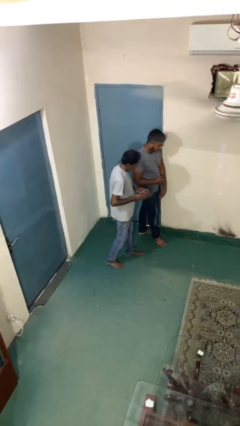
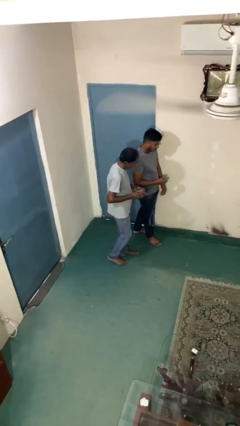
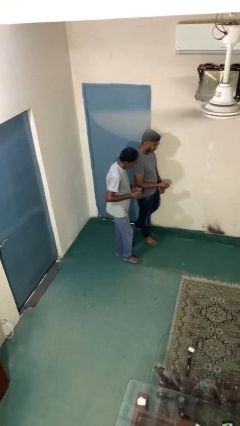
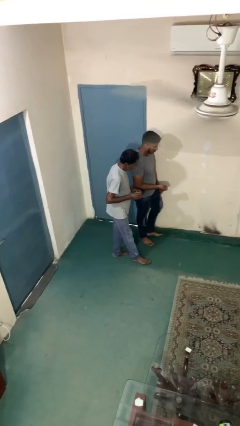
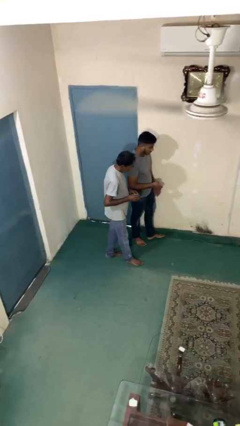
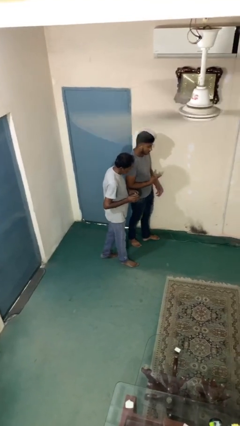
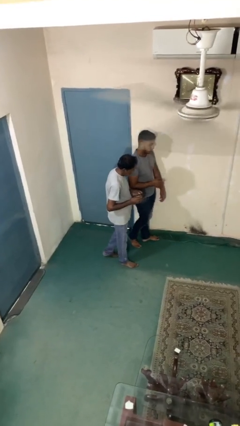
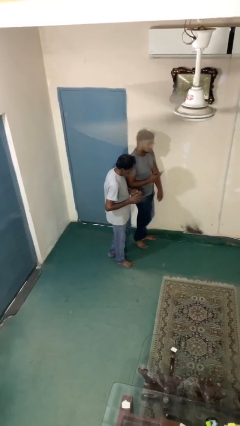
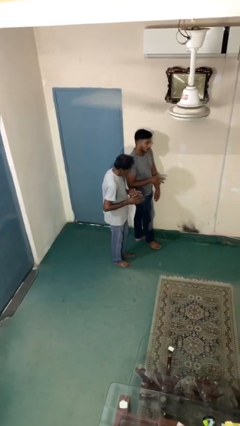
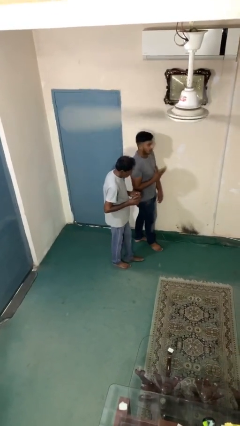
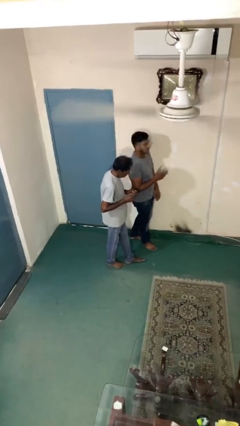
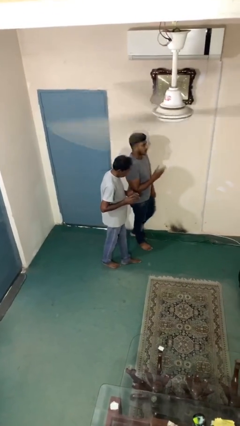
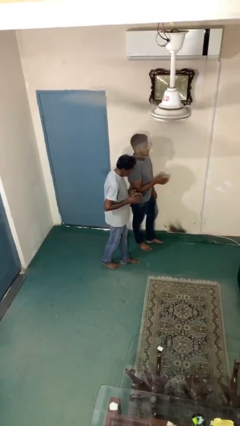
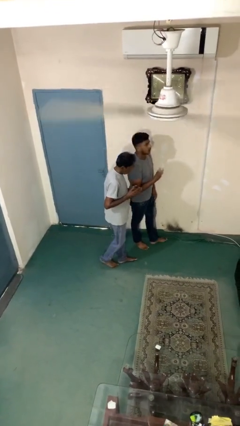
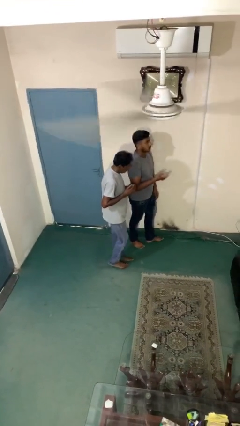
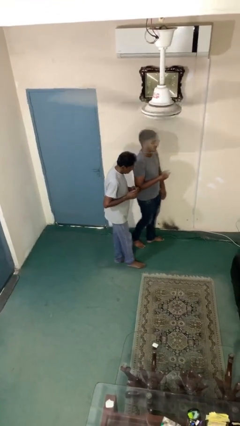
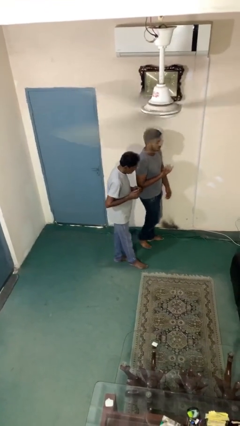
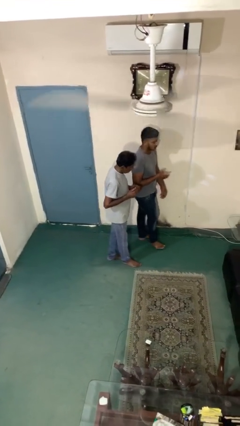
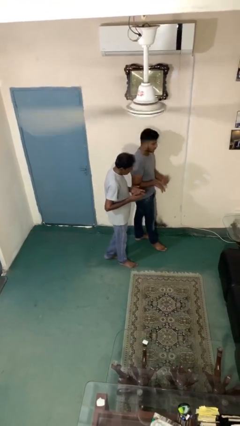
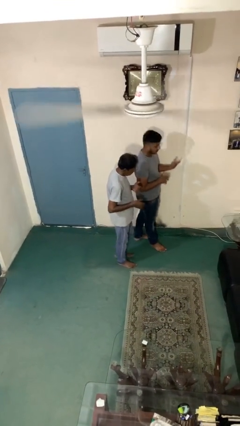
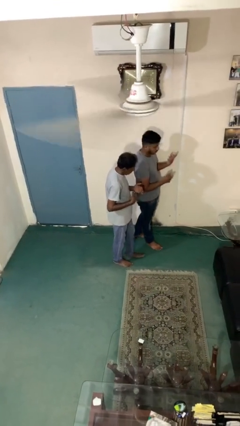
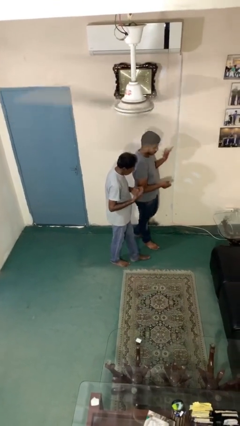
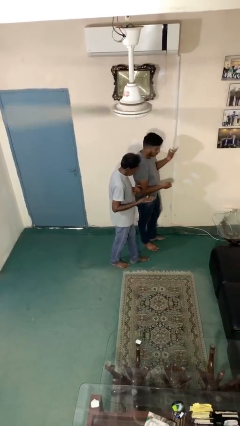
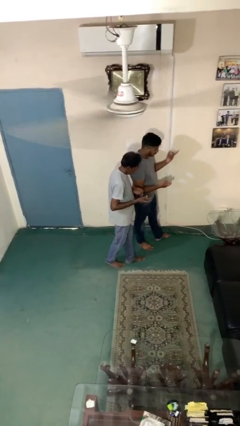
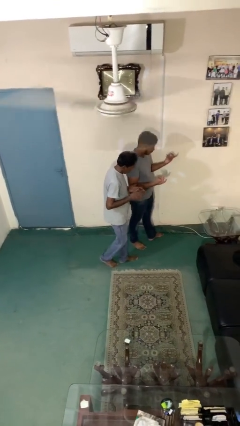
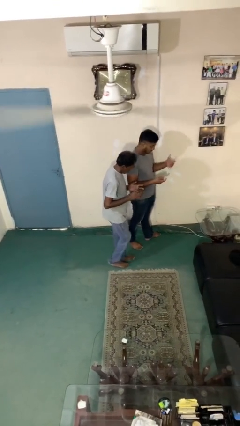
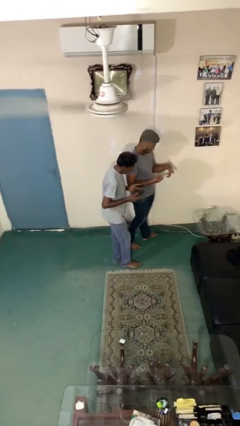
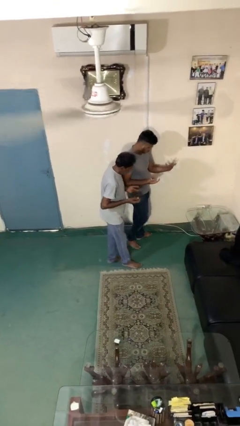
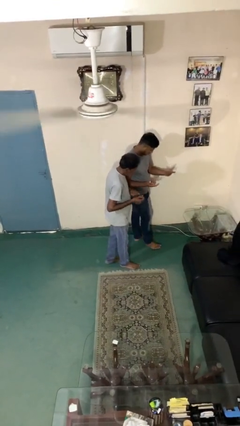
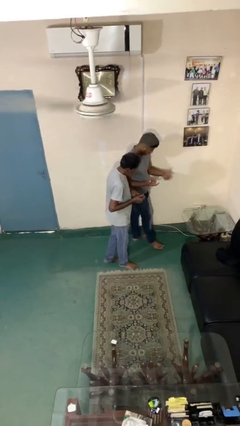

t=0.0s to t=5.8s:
person talks to person

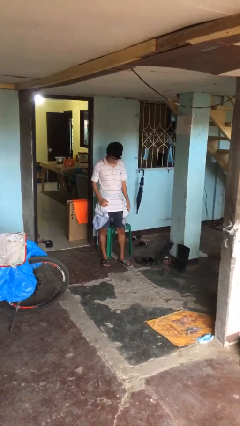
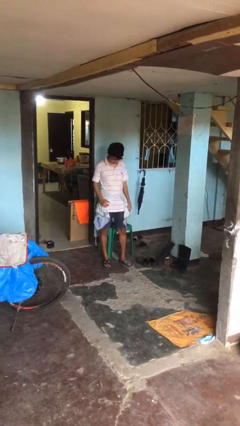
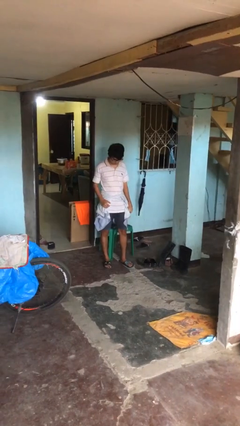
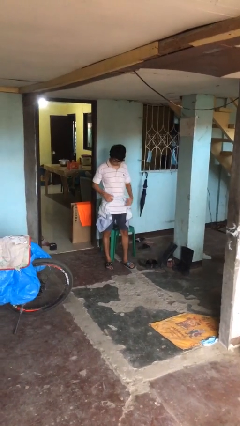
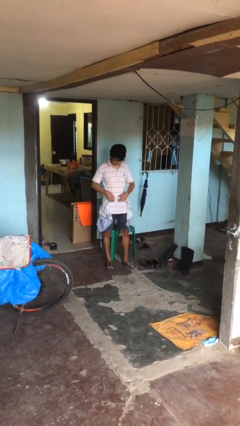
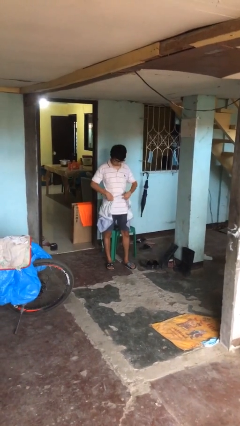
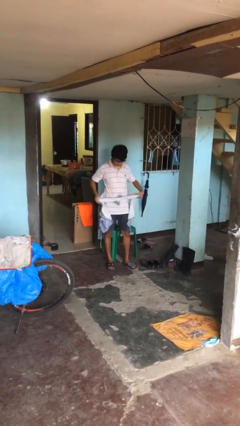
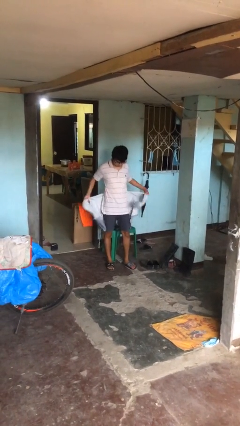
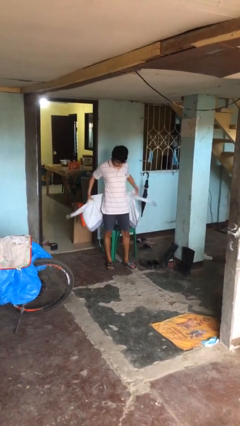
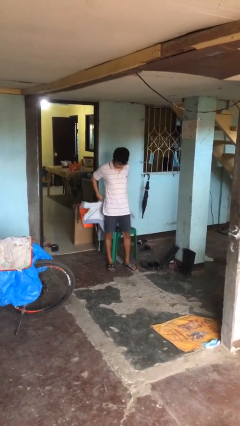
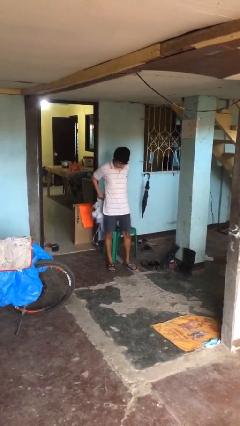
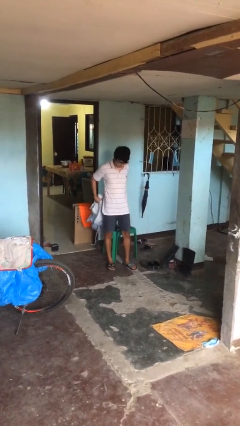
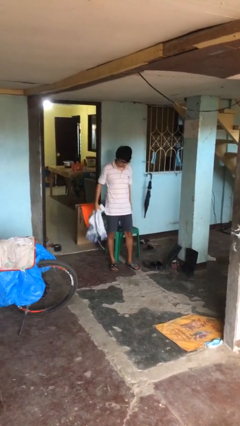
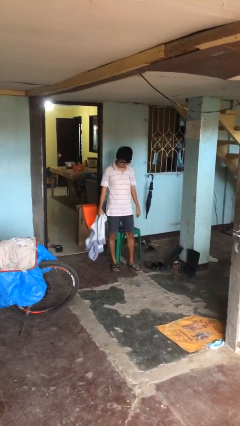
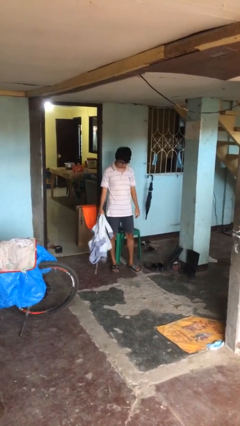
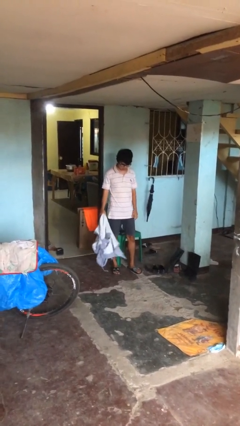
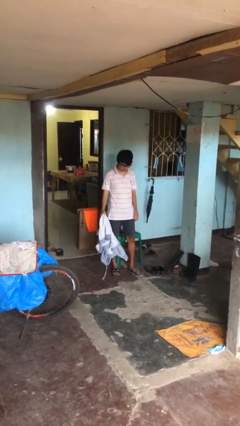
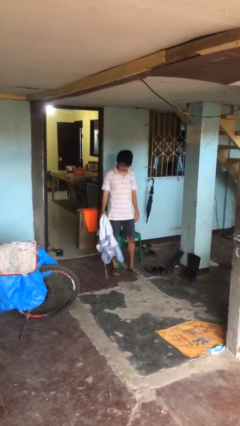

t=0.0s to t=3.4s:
person unties jacket around waist

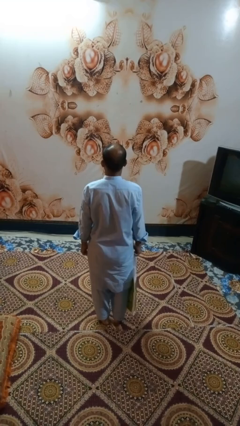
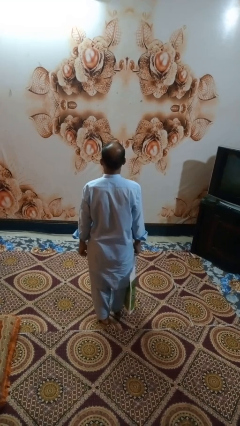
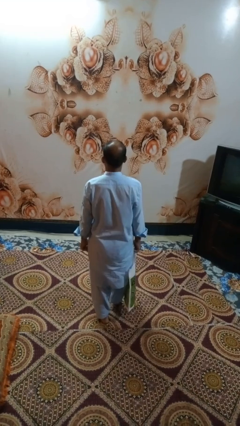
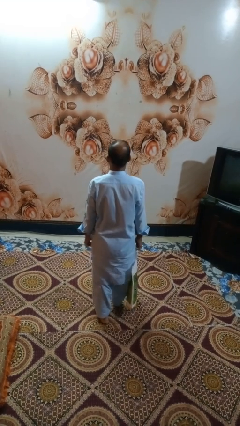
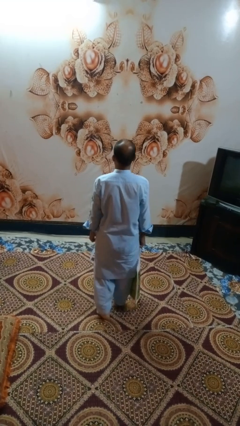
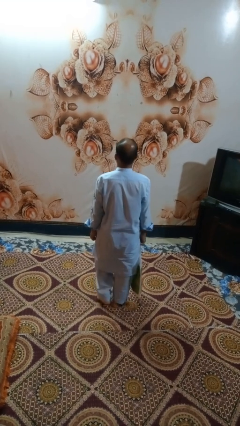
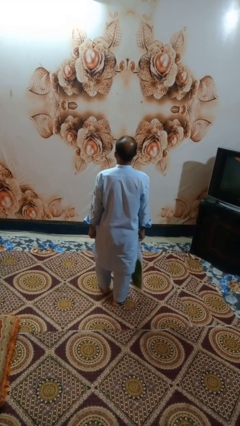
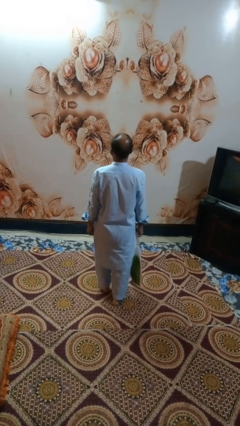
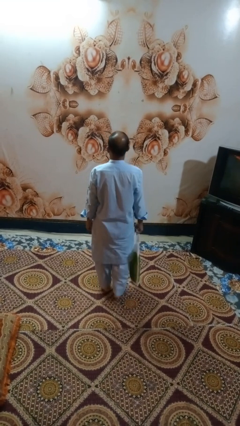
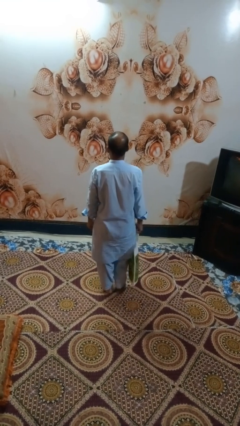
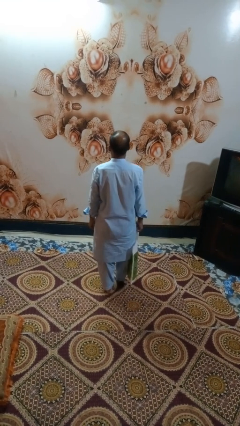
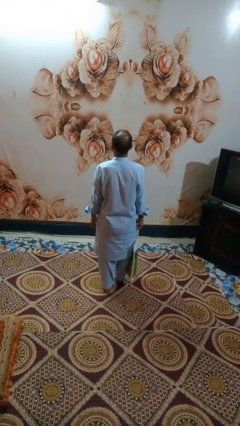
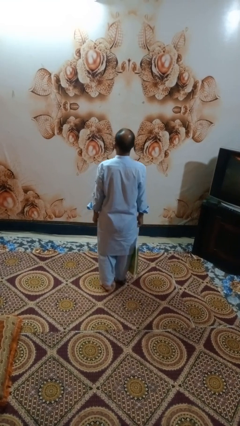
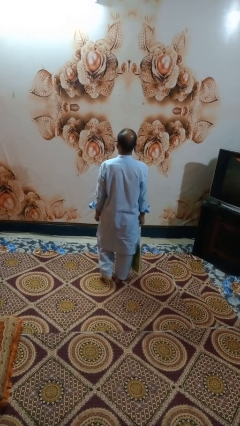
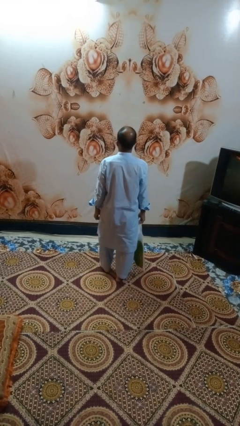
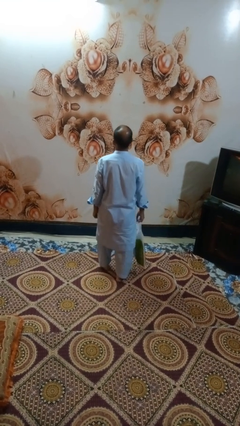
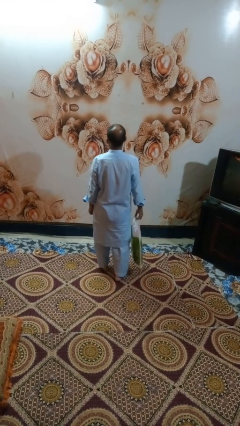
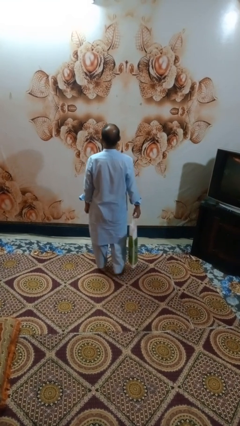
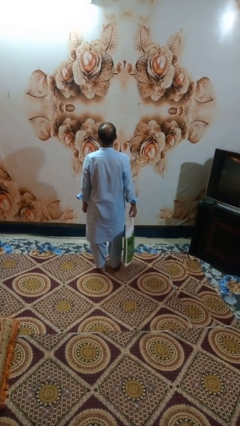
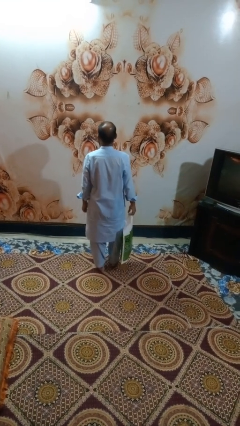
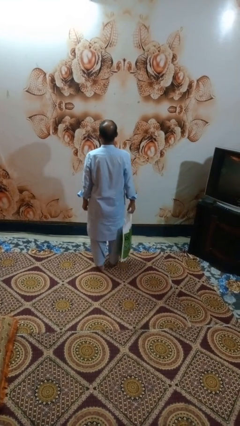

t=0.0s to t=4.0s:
person carries groceries

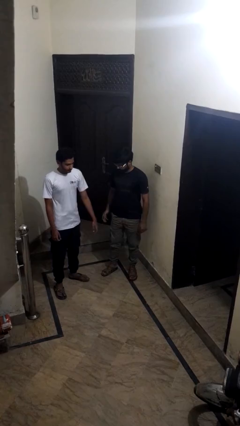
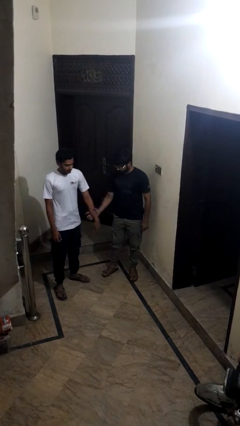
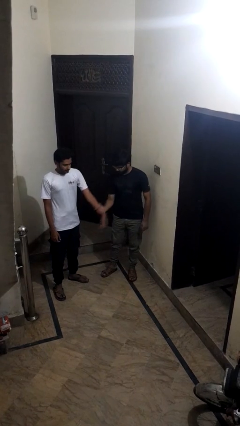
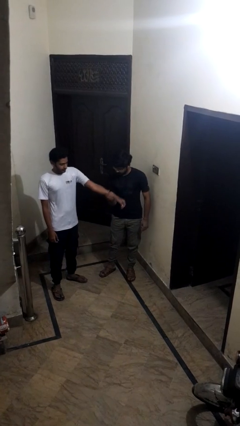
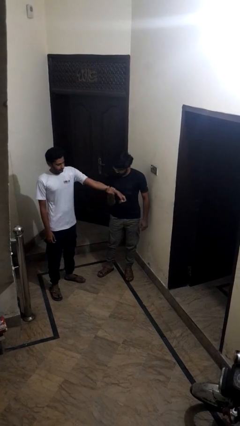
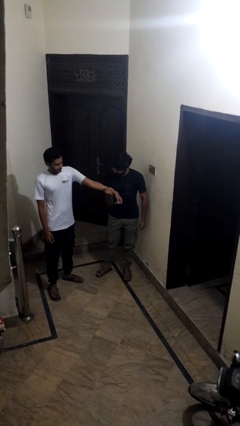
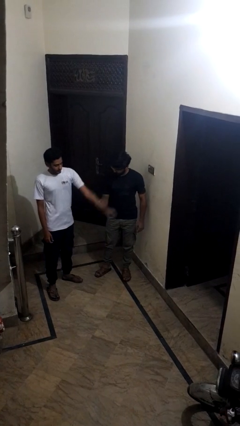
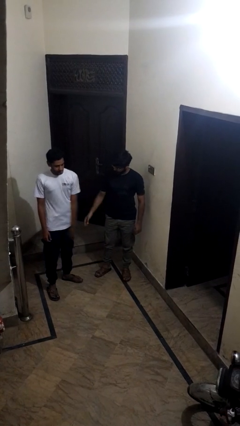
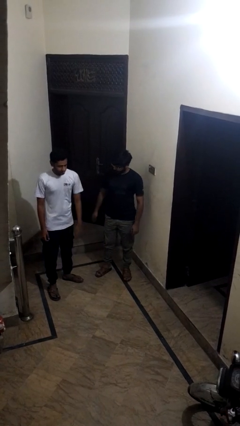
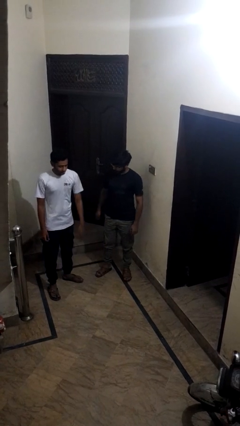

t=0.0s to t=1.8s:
person grabs person by forearm

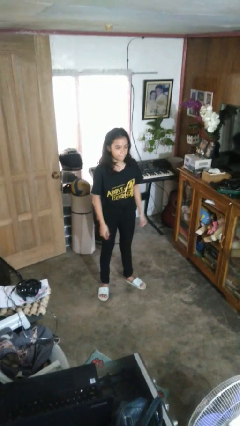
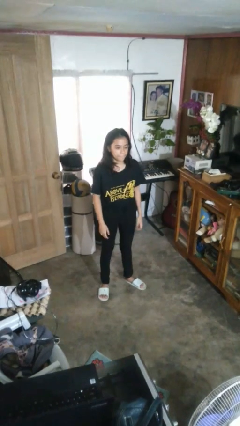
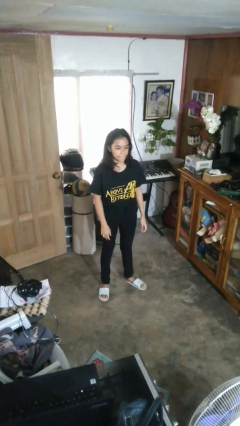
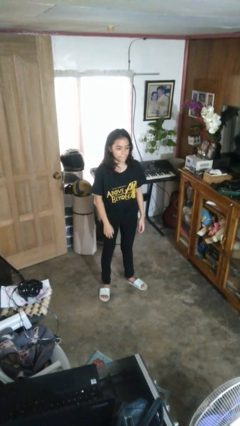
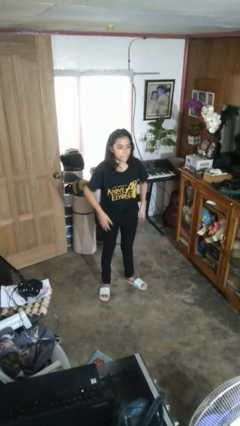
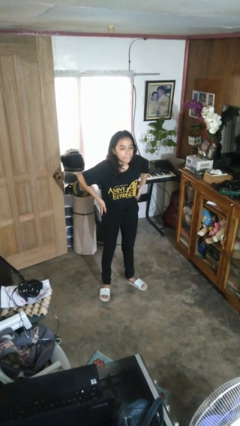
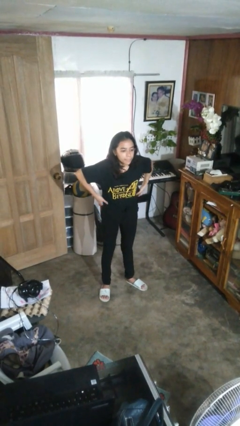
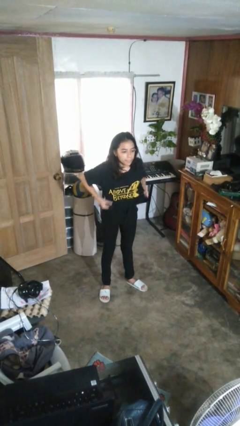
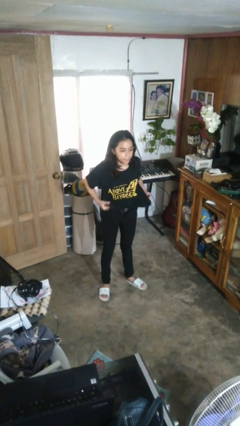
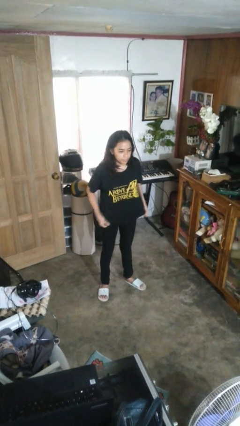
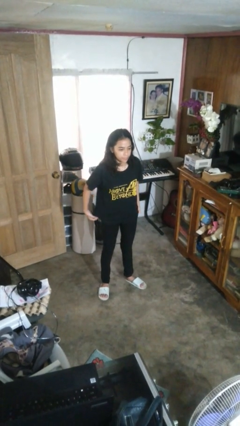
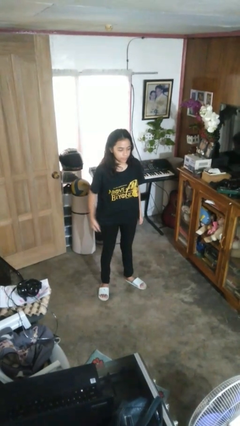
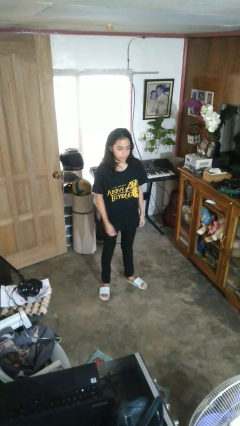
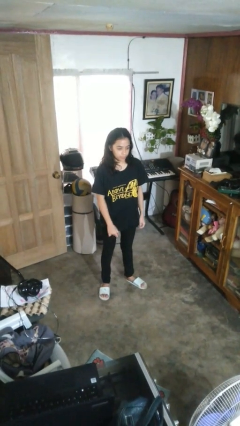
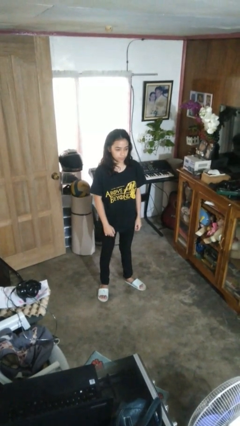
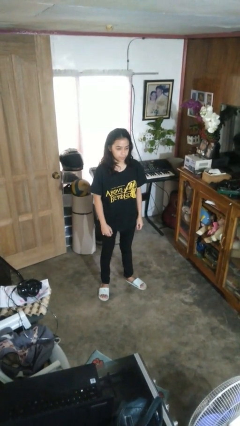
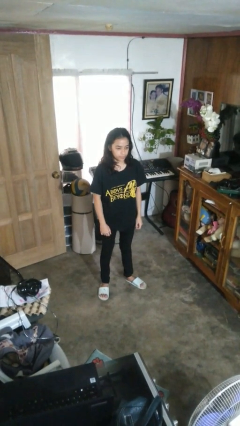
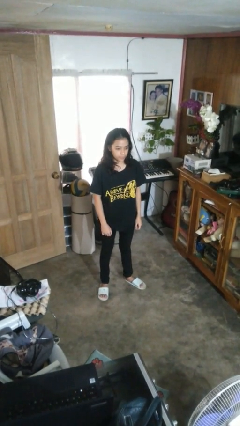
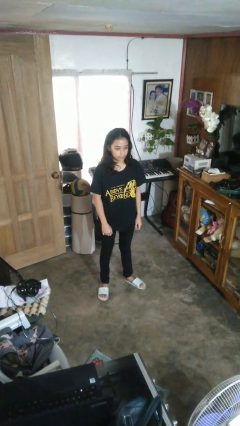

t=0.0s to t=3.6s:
person untucks shirt
